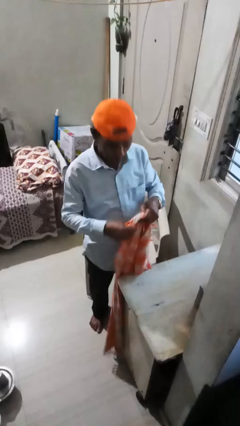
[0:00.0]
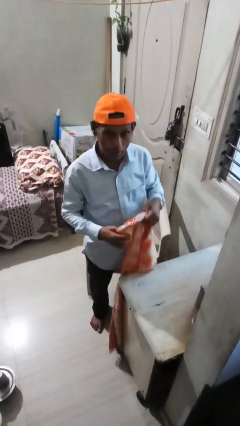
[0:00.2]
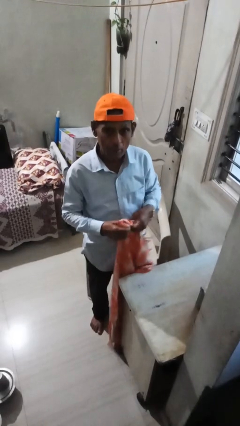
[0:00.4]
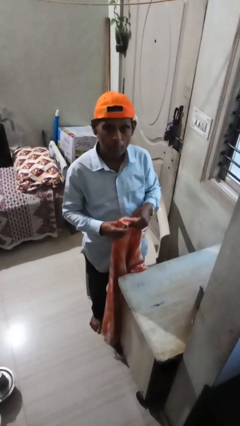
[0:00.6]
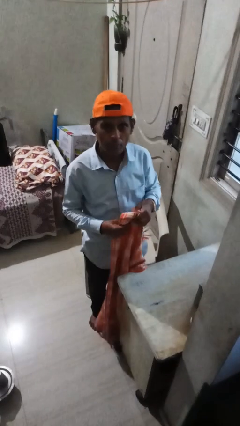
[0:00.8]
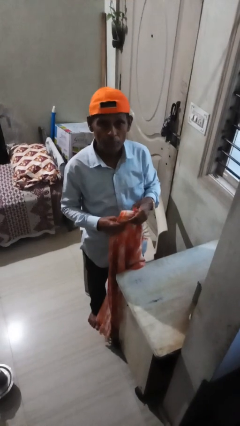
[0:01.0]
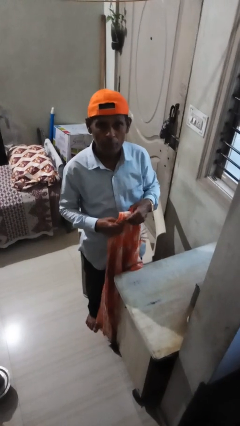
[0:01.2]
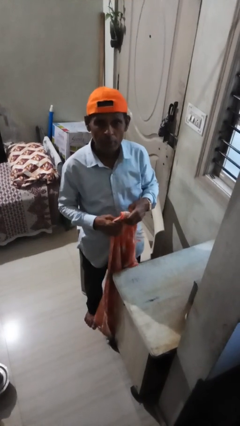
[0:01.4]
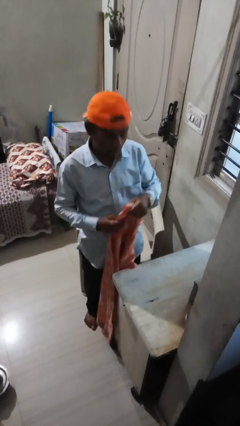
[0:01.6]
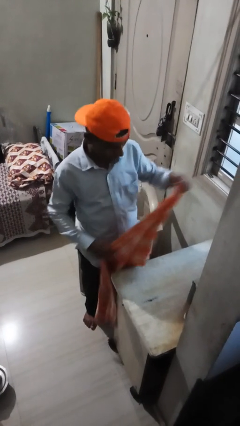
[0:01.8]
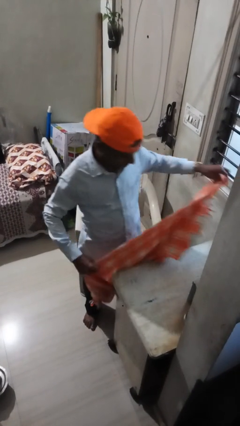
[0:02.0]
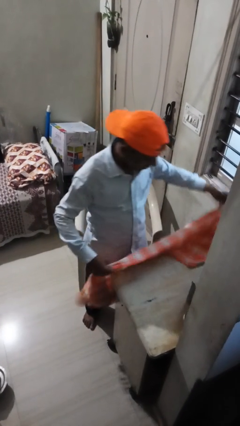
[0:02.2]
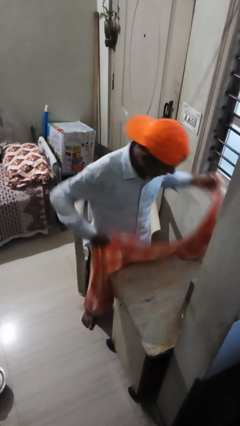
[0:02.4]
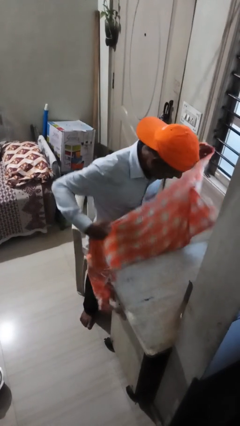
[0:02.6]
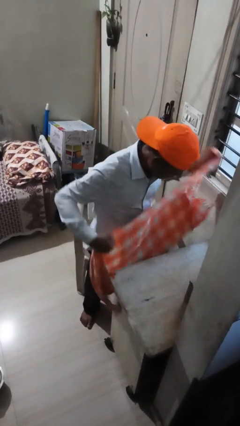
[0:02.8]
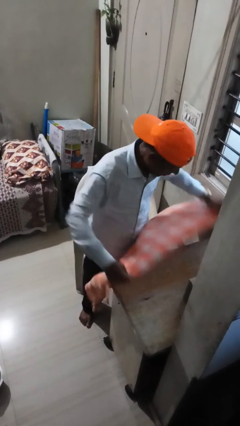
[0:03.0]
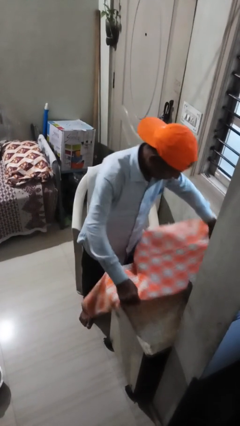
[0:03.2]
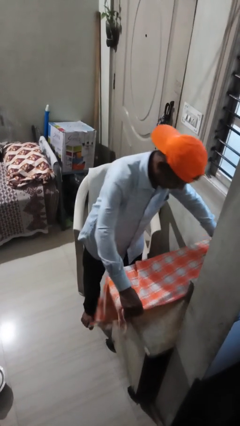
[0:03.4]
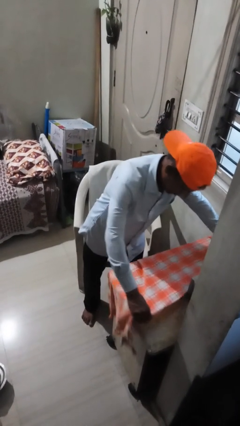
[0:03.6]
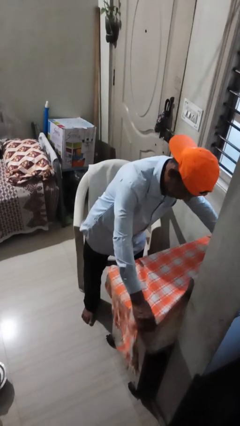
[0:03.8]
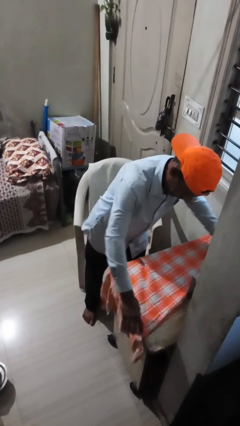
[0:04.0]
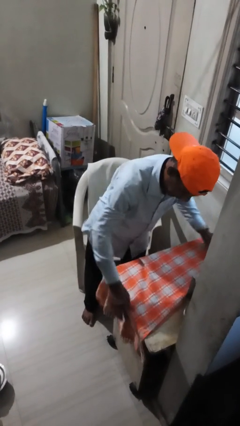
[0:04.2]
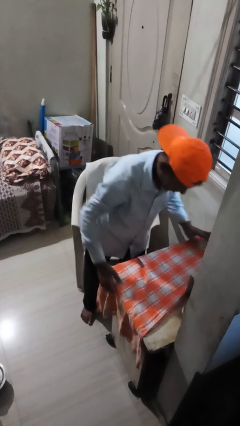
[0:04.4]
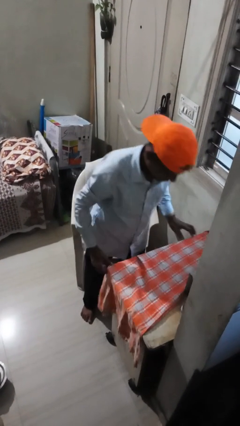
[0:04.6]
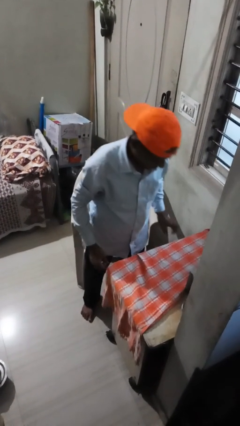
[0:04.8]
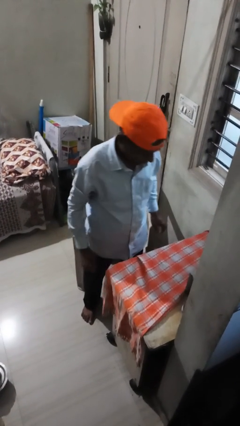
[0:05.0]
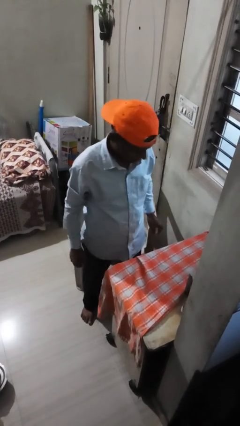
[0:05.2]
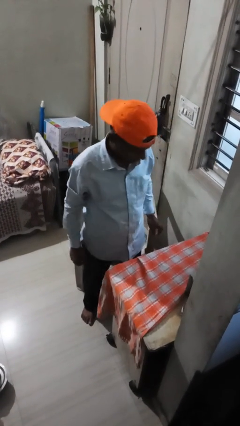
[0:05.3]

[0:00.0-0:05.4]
person spreads tablecloth

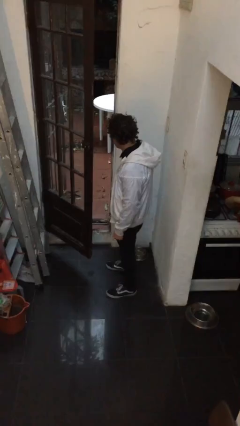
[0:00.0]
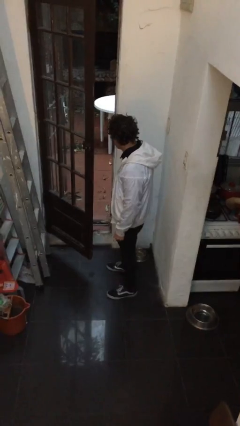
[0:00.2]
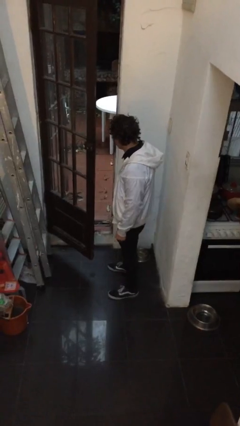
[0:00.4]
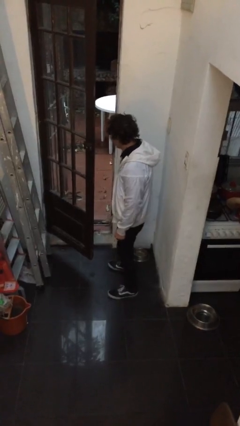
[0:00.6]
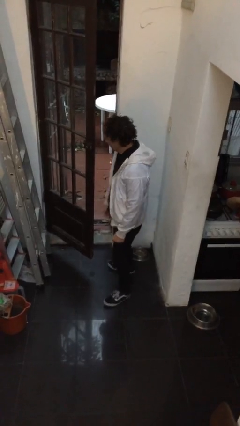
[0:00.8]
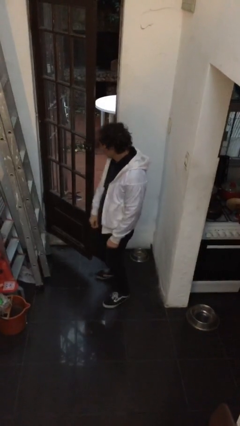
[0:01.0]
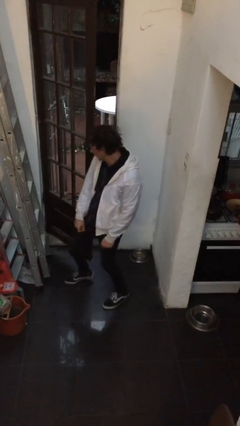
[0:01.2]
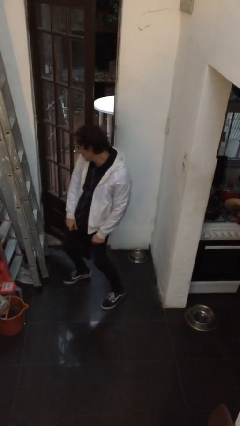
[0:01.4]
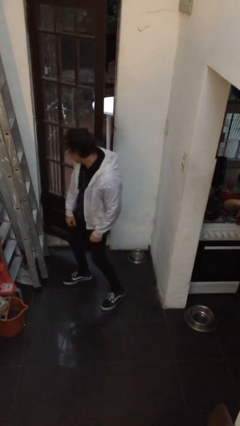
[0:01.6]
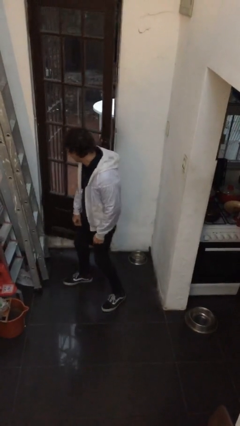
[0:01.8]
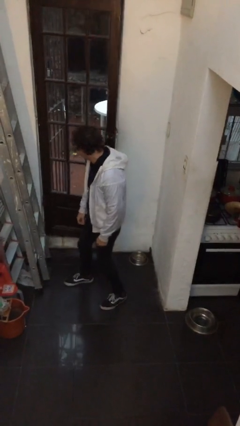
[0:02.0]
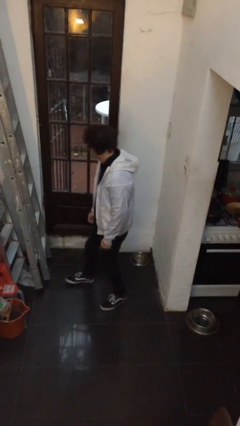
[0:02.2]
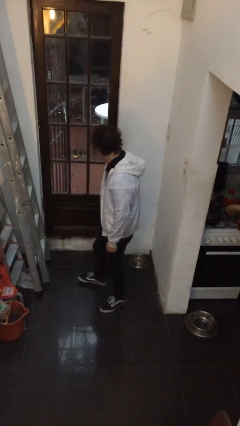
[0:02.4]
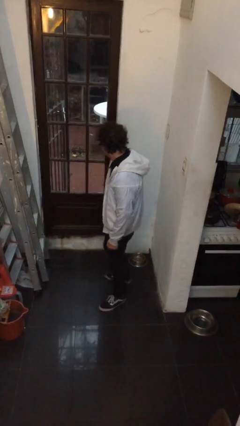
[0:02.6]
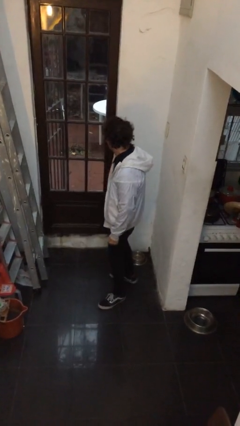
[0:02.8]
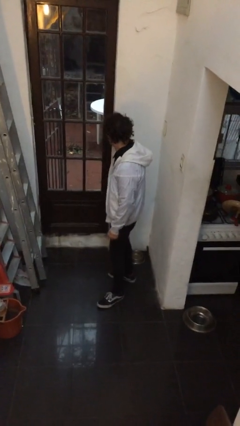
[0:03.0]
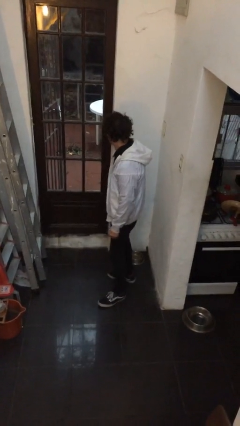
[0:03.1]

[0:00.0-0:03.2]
person closes door with hip

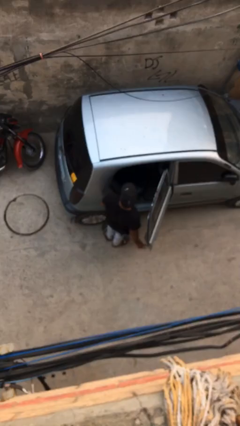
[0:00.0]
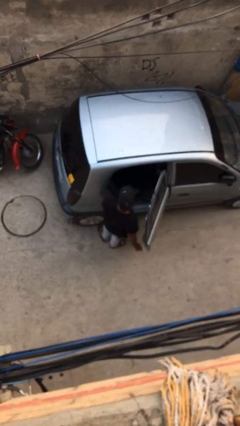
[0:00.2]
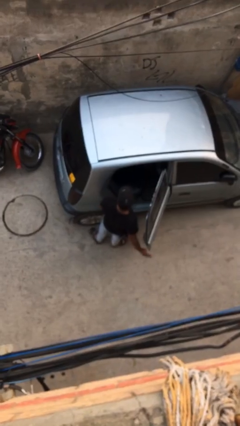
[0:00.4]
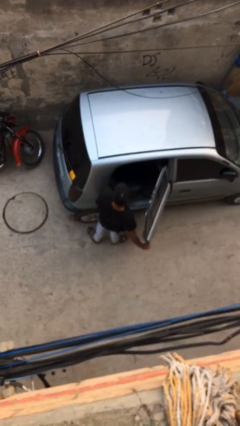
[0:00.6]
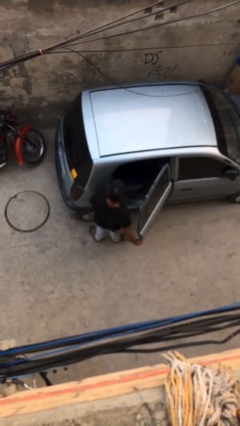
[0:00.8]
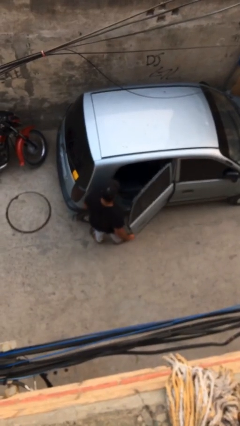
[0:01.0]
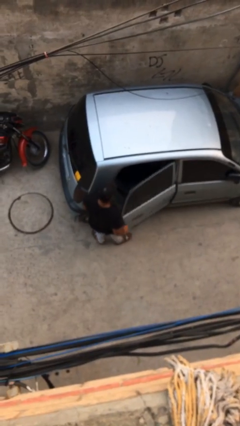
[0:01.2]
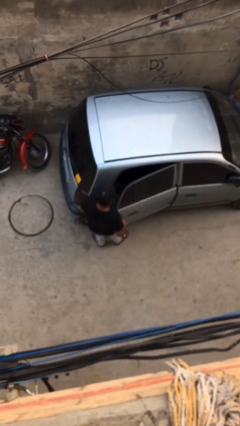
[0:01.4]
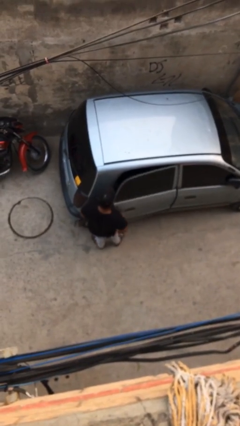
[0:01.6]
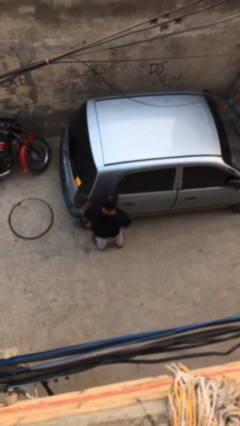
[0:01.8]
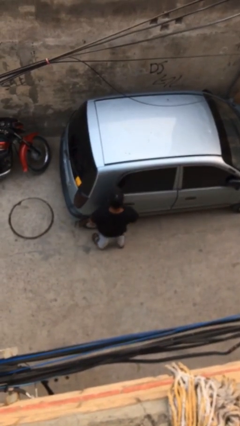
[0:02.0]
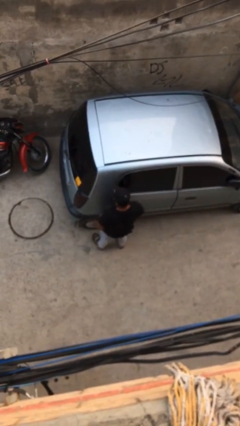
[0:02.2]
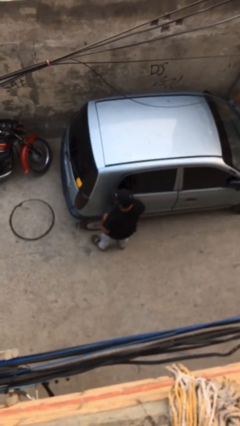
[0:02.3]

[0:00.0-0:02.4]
person closes car door

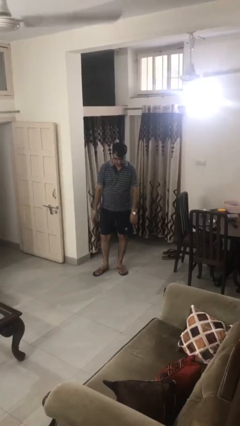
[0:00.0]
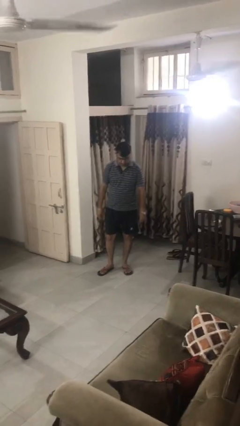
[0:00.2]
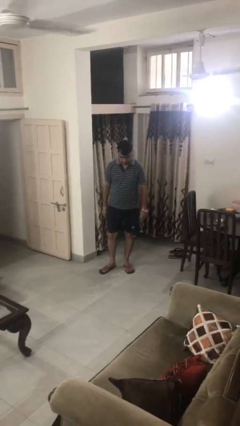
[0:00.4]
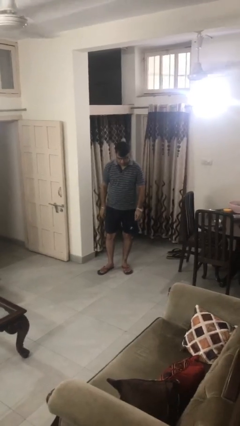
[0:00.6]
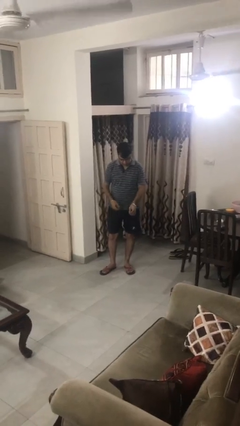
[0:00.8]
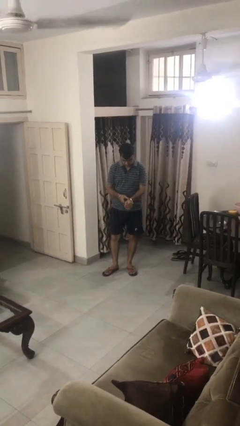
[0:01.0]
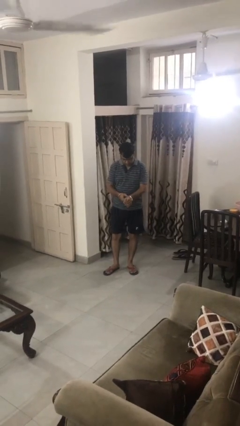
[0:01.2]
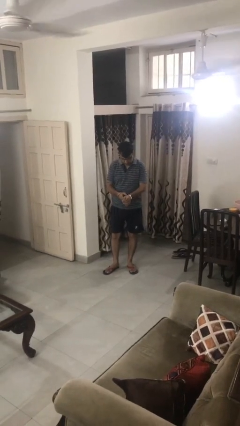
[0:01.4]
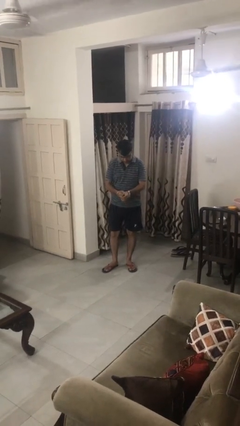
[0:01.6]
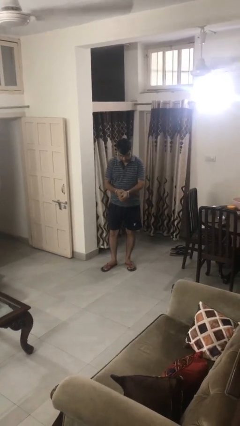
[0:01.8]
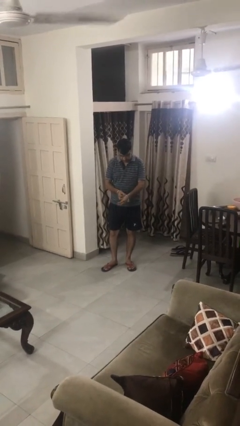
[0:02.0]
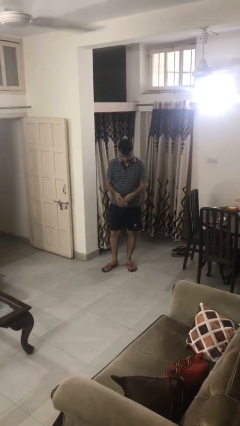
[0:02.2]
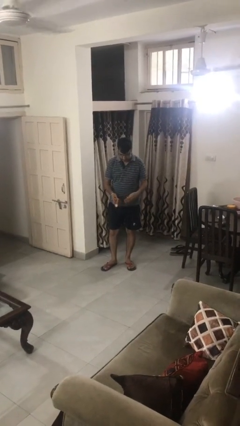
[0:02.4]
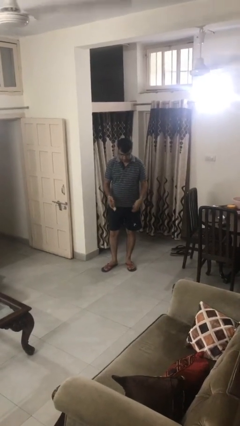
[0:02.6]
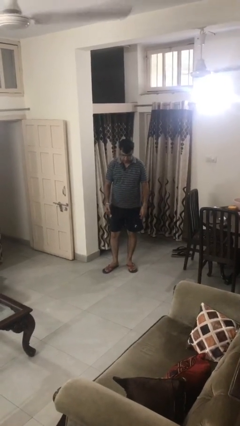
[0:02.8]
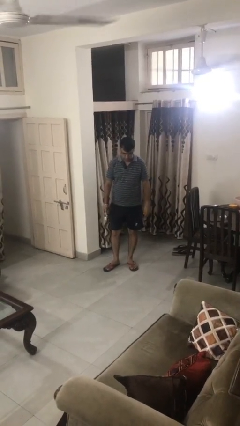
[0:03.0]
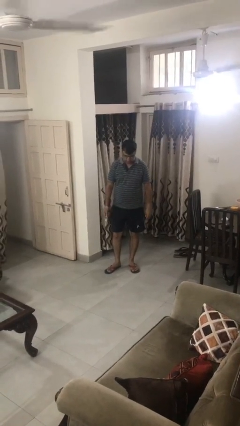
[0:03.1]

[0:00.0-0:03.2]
person takes off wristwatch

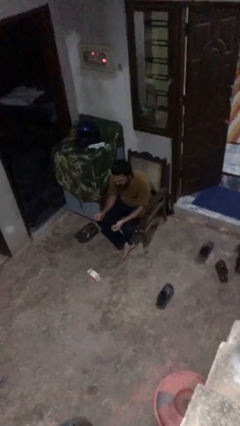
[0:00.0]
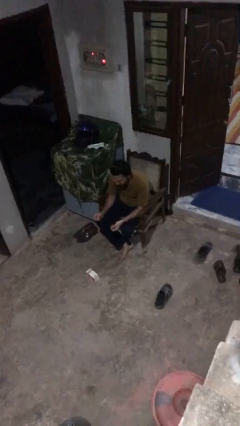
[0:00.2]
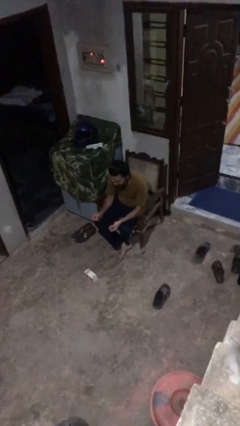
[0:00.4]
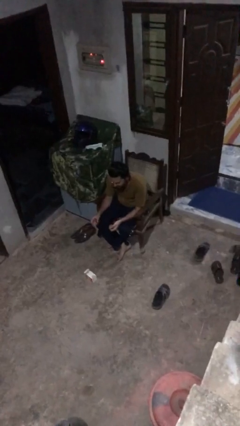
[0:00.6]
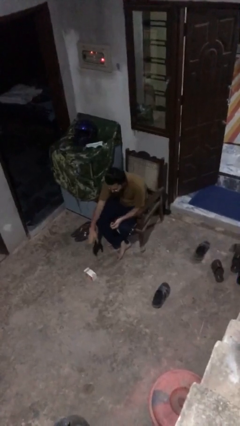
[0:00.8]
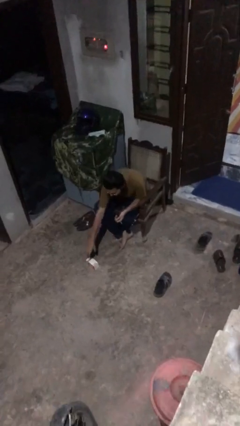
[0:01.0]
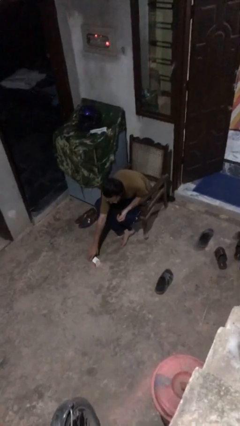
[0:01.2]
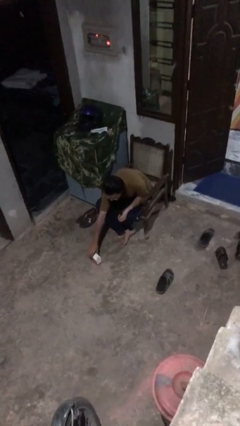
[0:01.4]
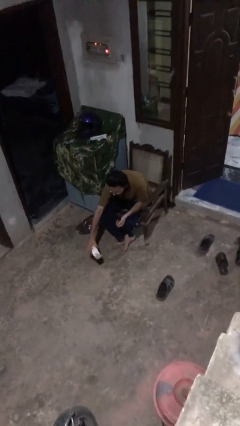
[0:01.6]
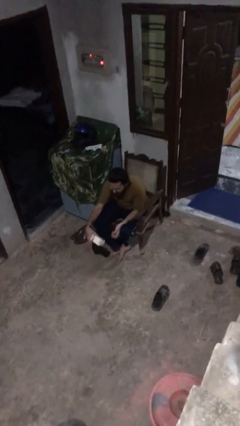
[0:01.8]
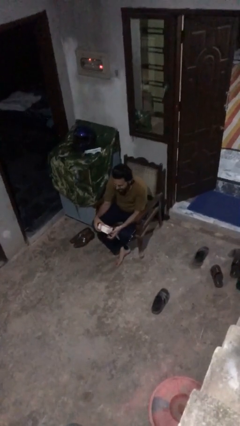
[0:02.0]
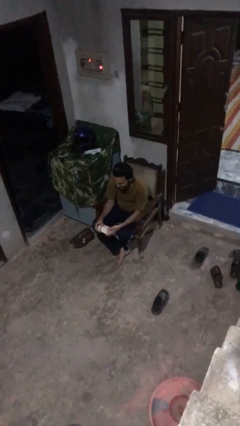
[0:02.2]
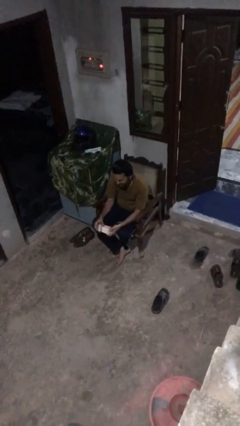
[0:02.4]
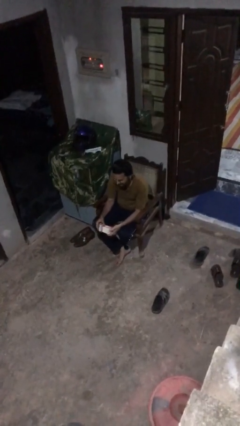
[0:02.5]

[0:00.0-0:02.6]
person picks up object from floor

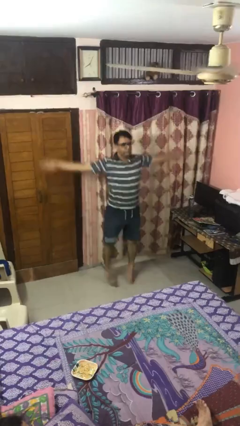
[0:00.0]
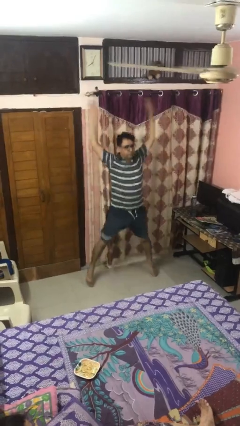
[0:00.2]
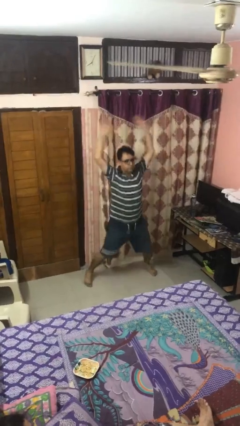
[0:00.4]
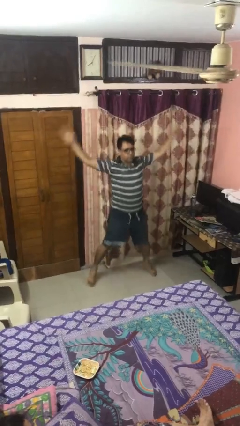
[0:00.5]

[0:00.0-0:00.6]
person exercises with jumping jacks
